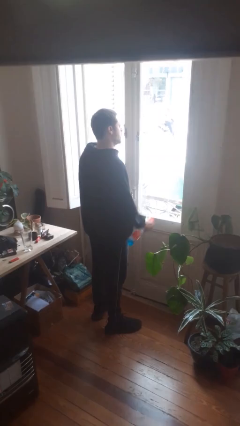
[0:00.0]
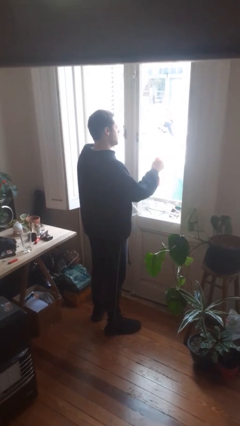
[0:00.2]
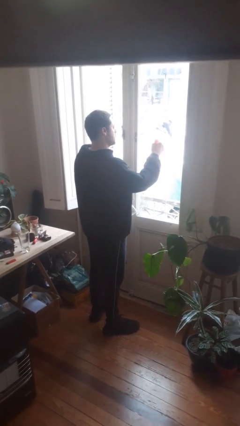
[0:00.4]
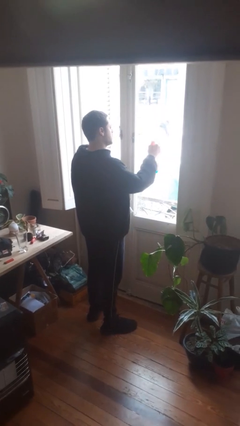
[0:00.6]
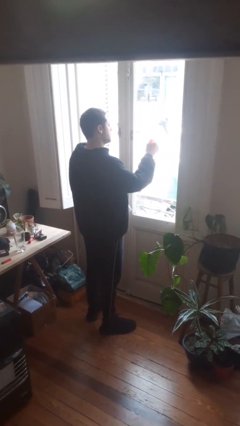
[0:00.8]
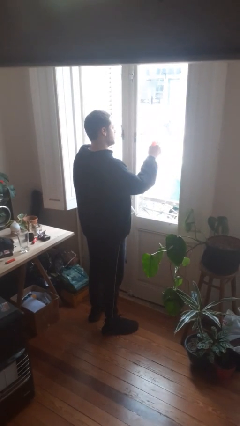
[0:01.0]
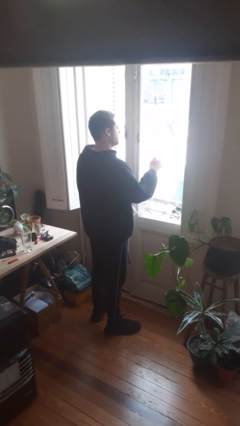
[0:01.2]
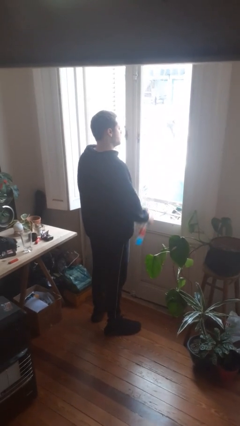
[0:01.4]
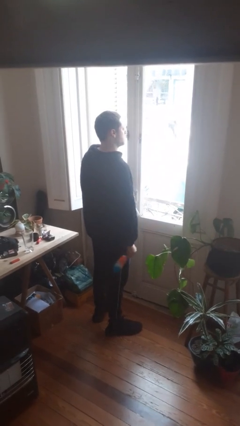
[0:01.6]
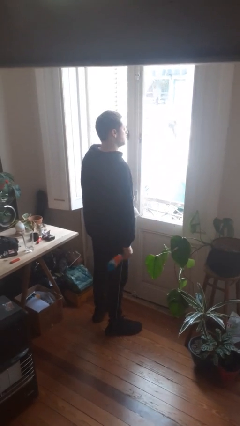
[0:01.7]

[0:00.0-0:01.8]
person sprays from bottle

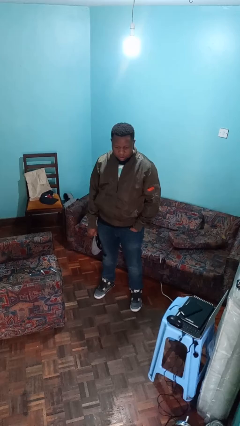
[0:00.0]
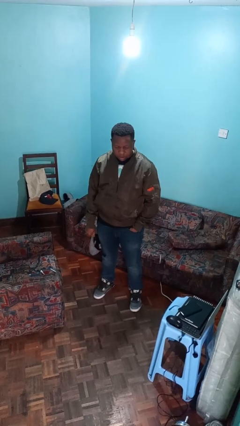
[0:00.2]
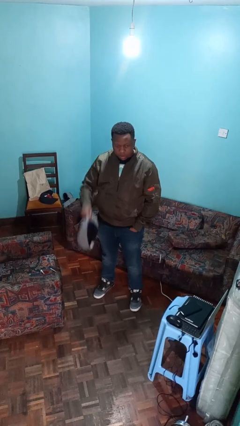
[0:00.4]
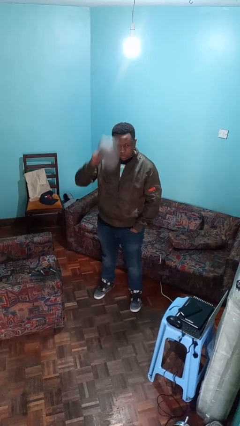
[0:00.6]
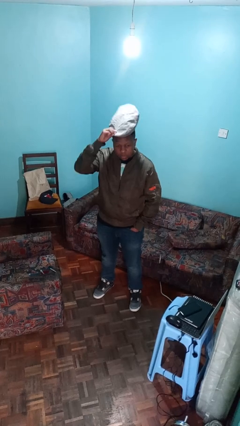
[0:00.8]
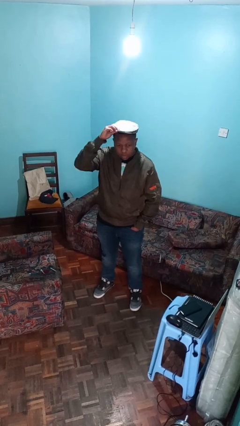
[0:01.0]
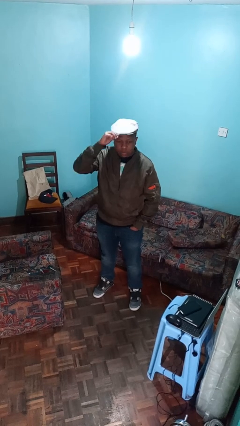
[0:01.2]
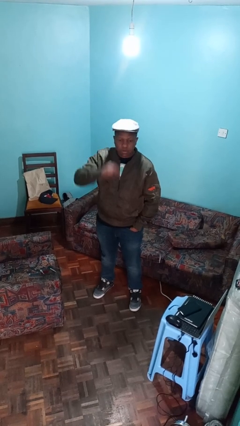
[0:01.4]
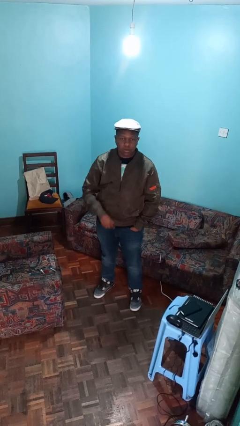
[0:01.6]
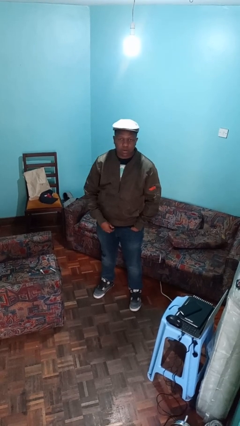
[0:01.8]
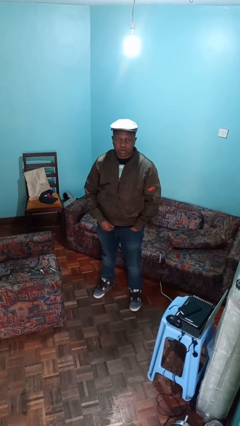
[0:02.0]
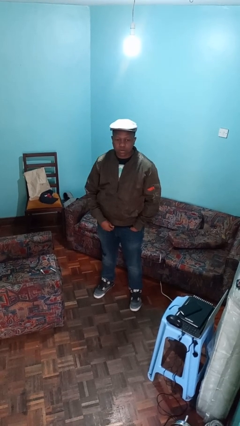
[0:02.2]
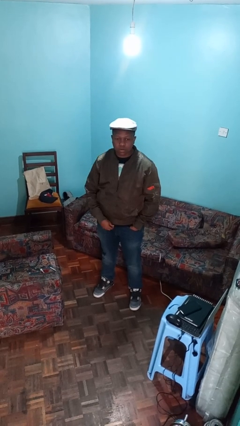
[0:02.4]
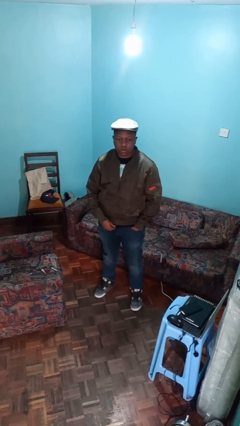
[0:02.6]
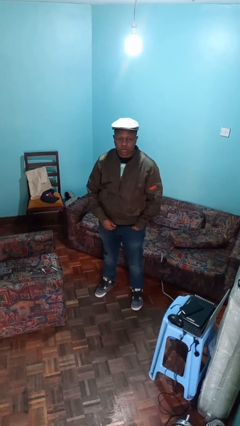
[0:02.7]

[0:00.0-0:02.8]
person puts on hat

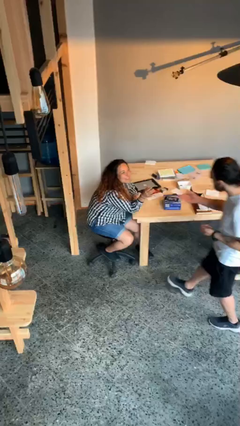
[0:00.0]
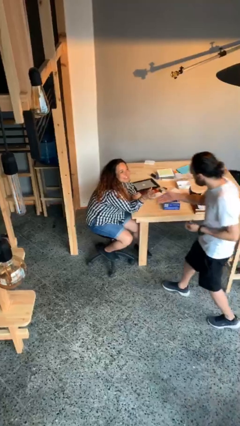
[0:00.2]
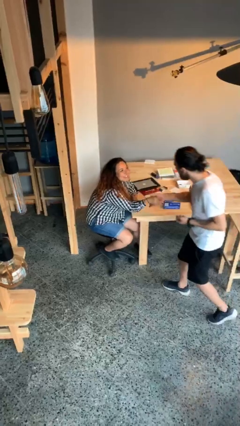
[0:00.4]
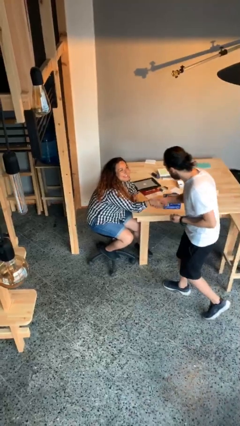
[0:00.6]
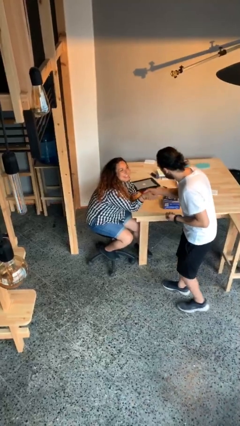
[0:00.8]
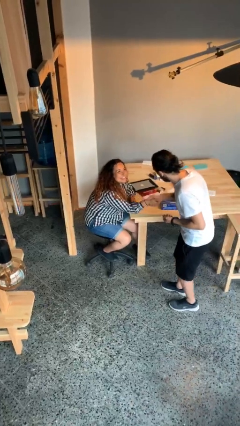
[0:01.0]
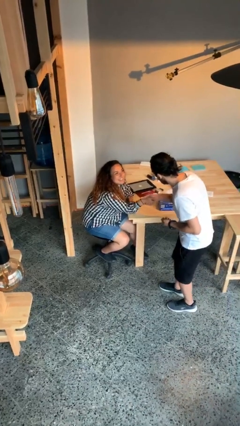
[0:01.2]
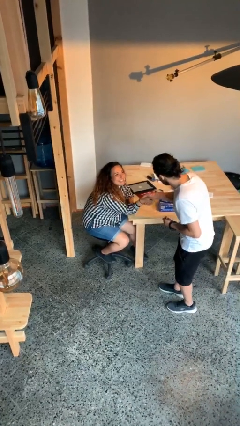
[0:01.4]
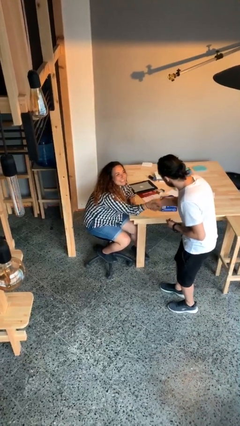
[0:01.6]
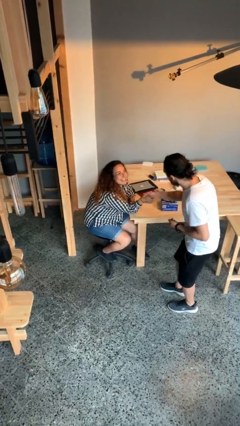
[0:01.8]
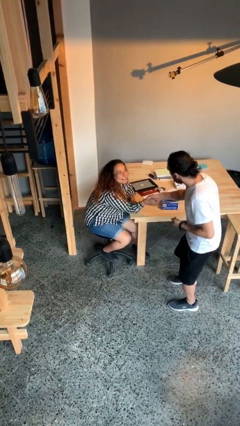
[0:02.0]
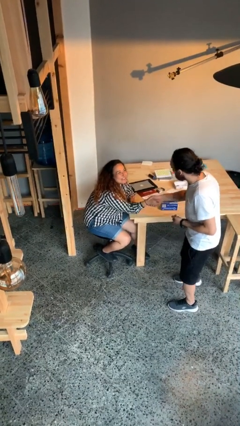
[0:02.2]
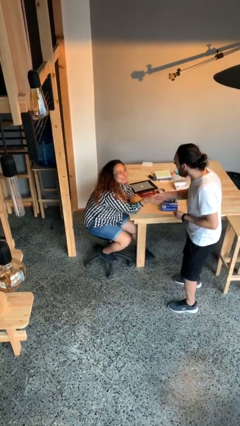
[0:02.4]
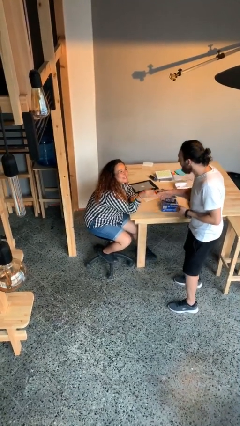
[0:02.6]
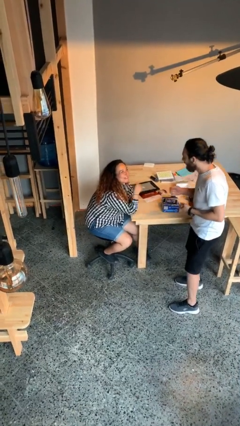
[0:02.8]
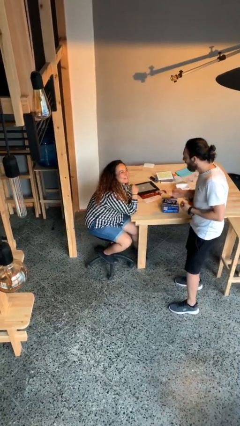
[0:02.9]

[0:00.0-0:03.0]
person shakes hand

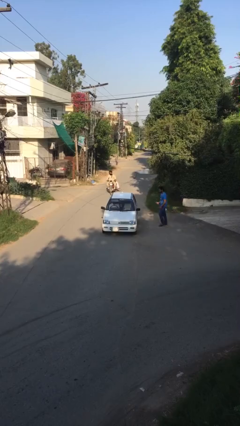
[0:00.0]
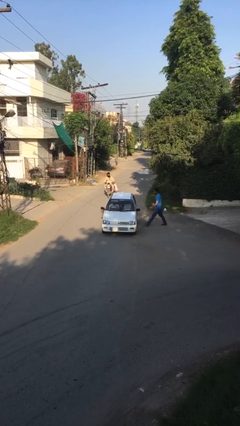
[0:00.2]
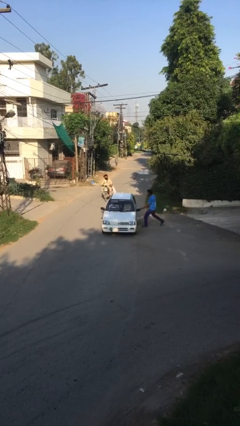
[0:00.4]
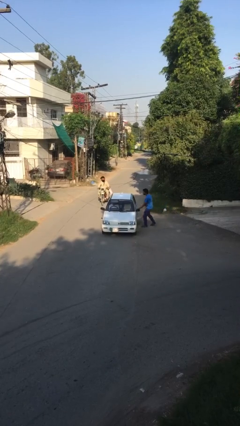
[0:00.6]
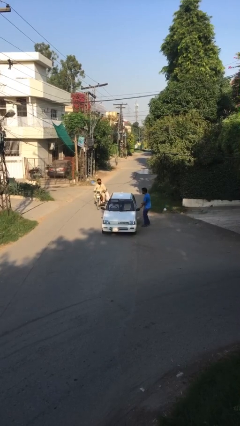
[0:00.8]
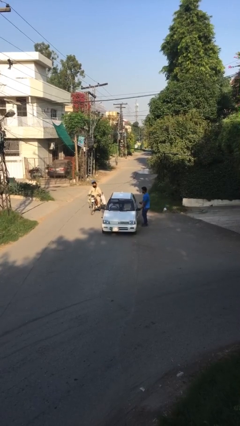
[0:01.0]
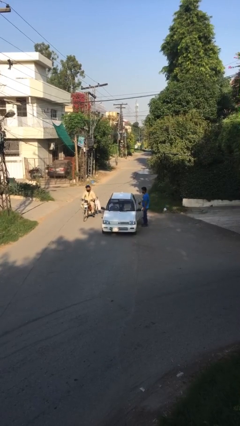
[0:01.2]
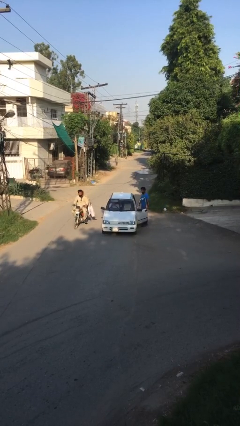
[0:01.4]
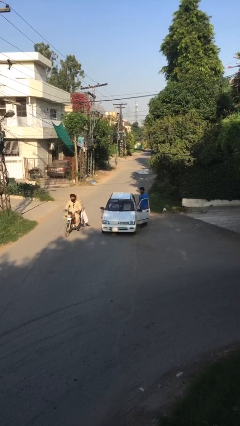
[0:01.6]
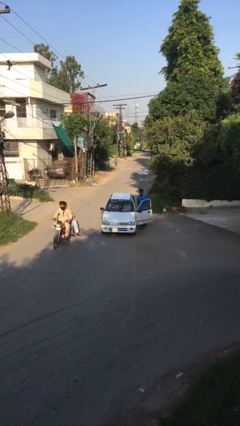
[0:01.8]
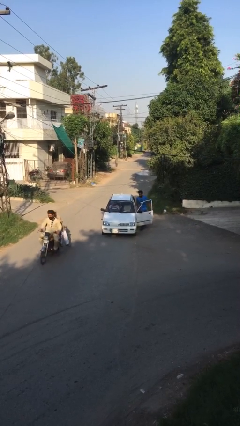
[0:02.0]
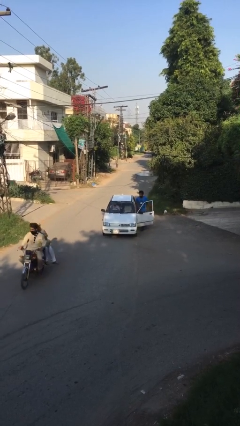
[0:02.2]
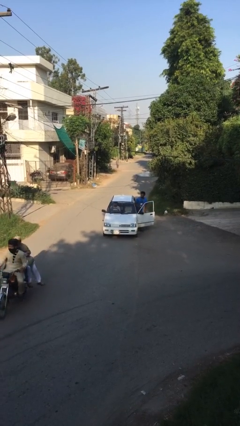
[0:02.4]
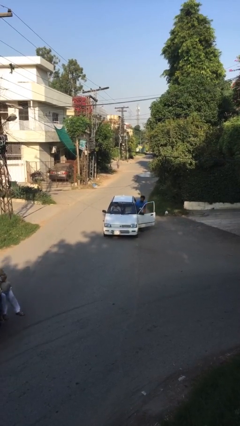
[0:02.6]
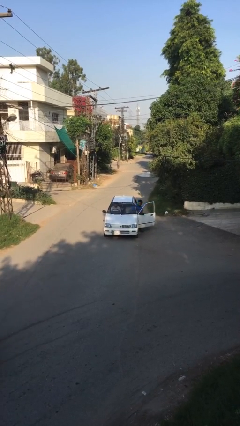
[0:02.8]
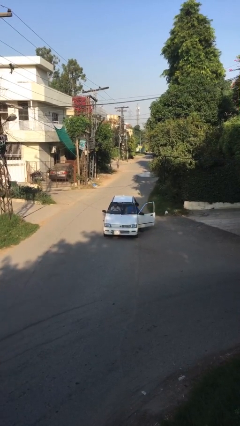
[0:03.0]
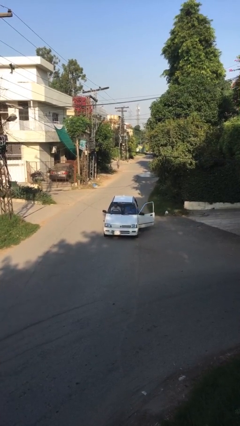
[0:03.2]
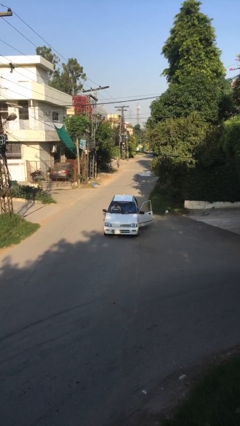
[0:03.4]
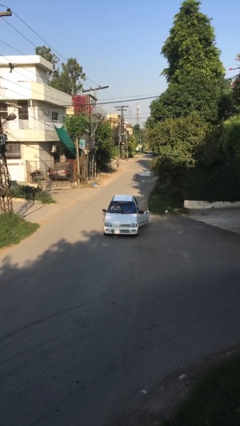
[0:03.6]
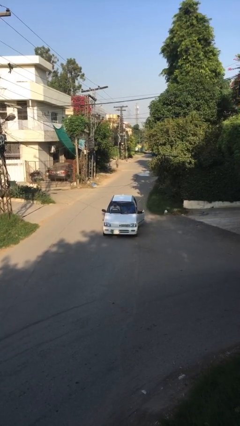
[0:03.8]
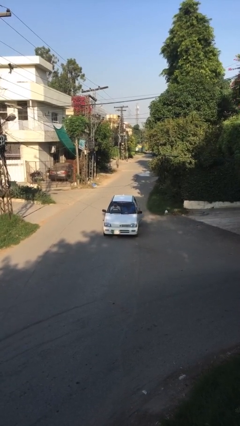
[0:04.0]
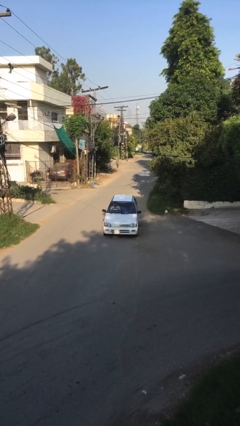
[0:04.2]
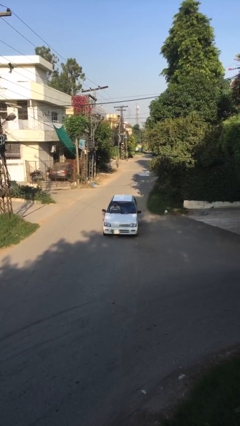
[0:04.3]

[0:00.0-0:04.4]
car picks up person

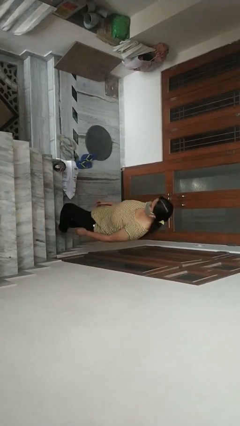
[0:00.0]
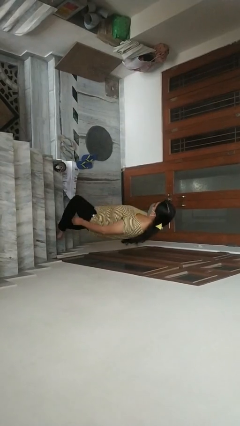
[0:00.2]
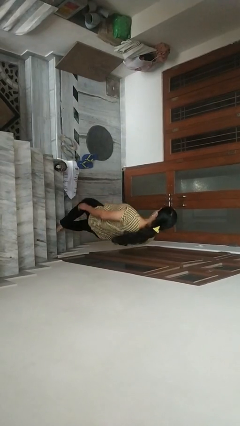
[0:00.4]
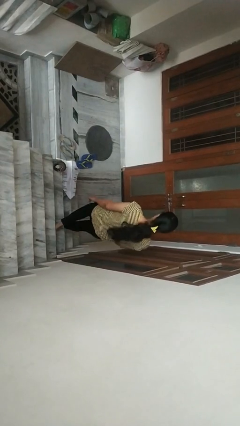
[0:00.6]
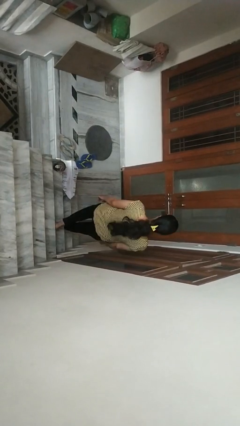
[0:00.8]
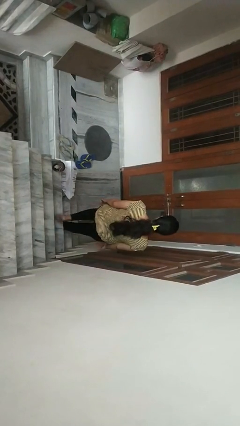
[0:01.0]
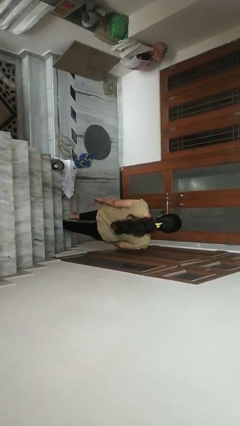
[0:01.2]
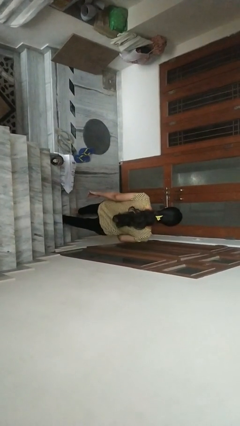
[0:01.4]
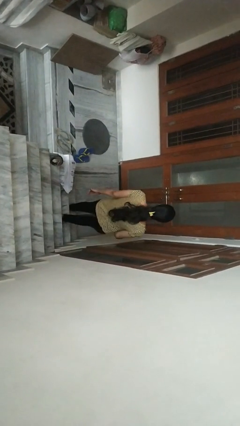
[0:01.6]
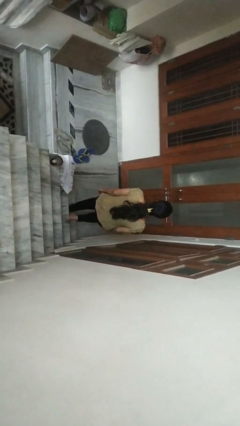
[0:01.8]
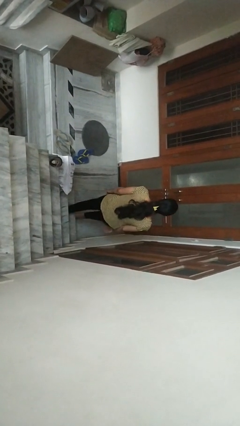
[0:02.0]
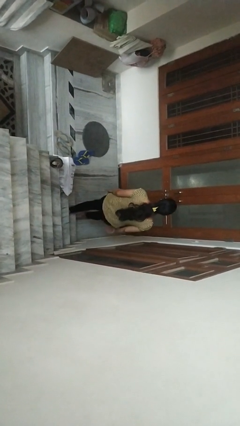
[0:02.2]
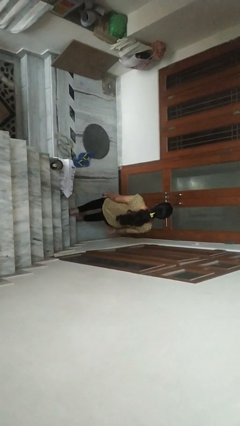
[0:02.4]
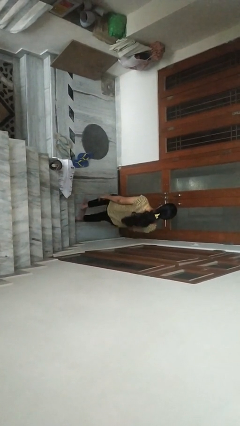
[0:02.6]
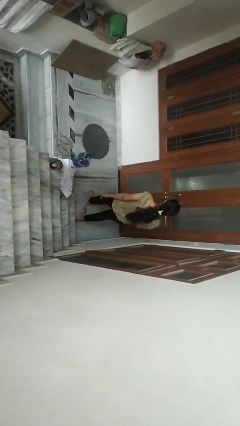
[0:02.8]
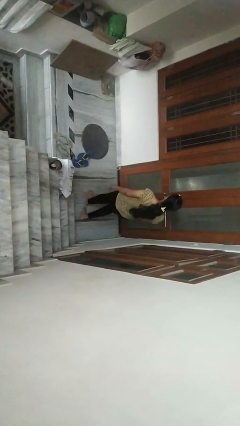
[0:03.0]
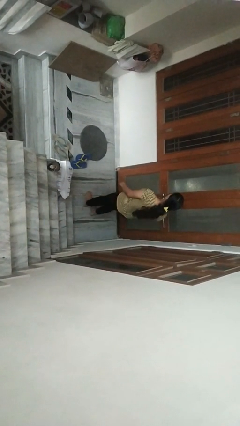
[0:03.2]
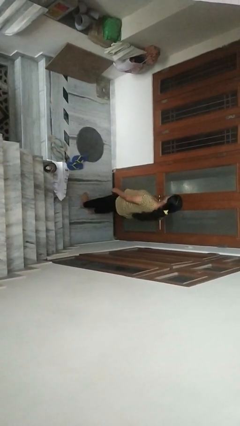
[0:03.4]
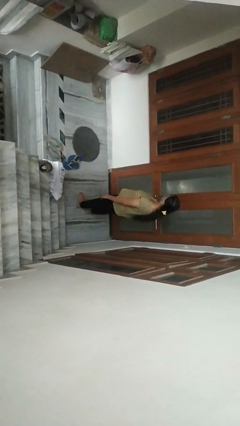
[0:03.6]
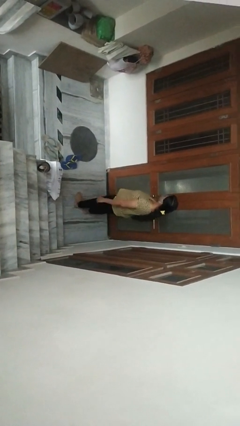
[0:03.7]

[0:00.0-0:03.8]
person climbs down stairs

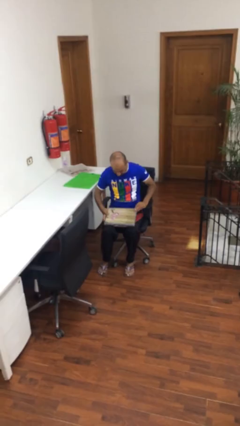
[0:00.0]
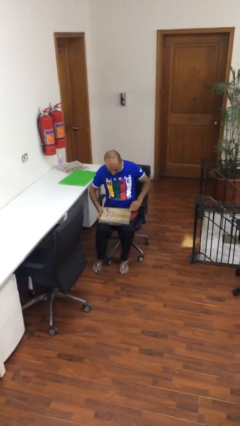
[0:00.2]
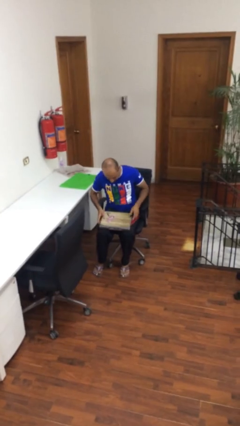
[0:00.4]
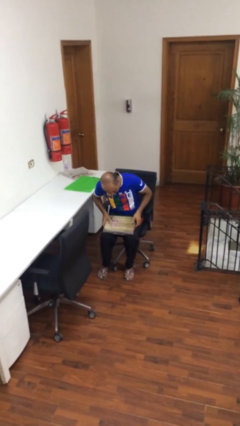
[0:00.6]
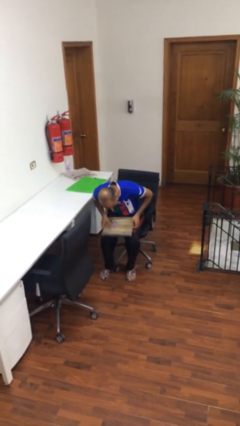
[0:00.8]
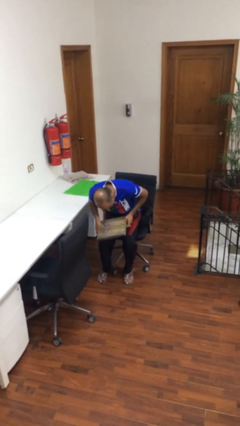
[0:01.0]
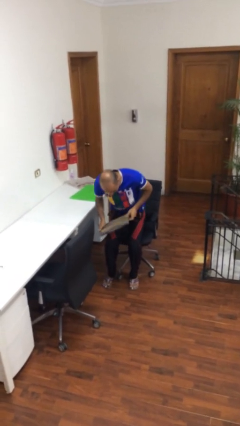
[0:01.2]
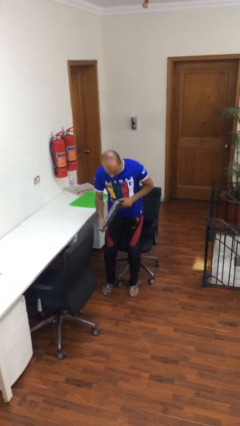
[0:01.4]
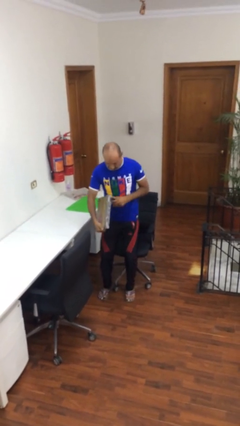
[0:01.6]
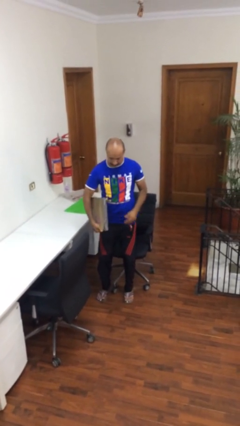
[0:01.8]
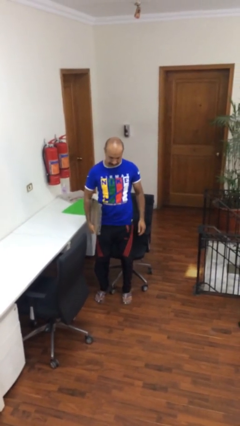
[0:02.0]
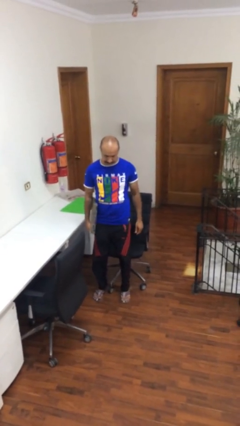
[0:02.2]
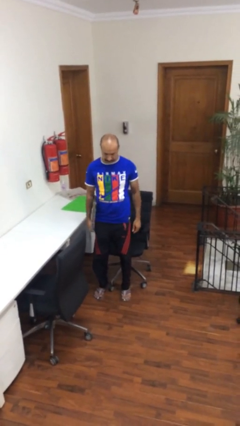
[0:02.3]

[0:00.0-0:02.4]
person stands up
